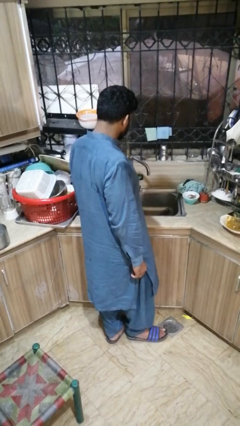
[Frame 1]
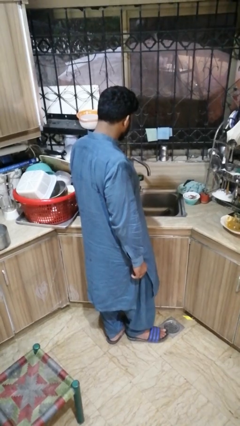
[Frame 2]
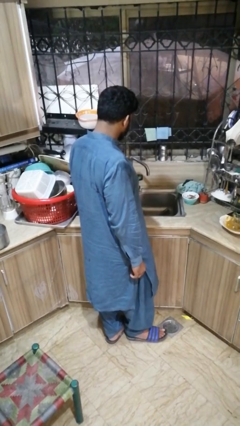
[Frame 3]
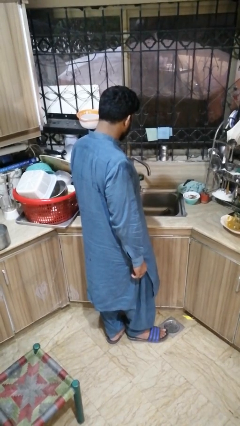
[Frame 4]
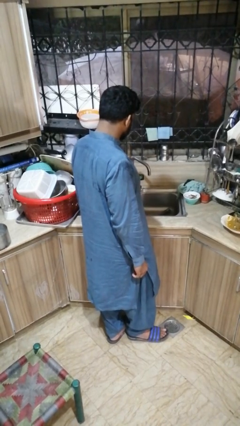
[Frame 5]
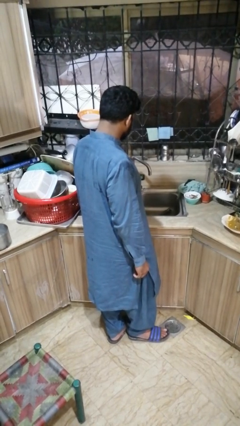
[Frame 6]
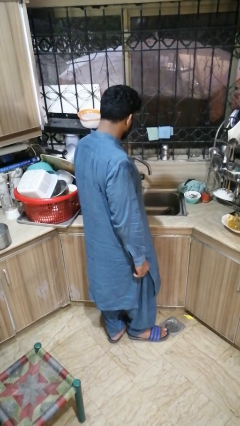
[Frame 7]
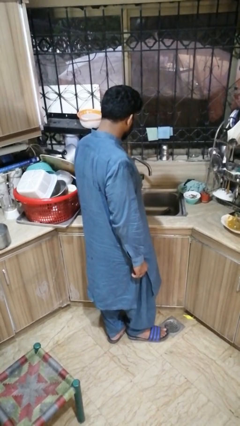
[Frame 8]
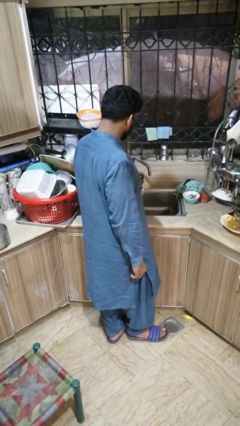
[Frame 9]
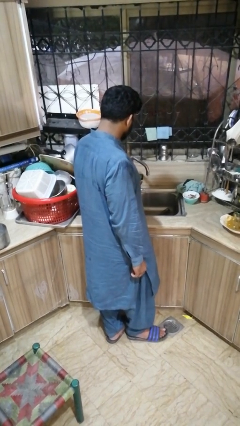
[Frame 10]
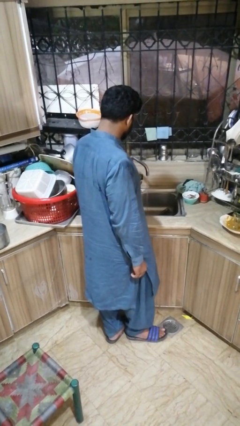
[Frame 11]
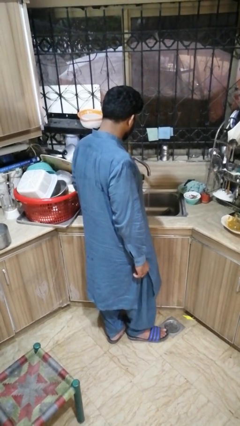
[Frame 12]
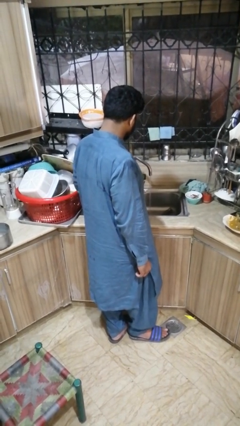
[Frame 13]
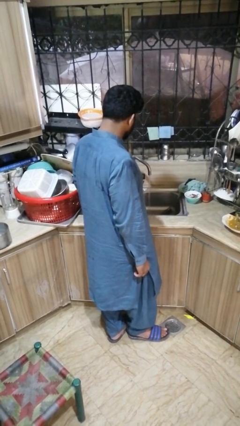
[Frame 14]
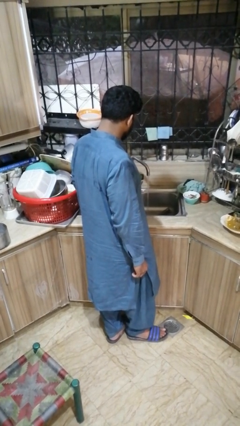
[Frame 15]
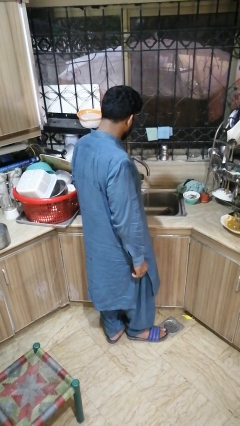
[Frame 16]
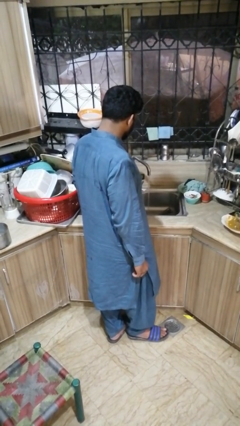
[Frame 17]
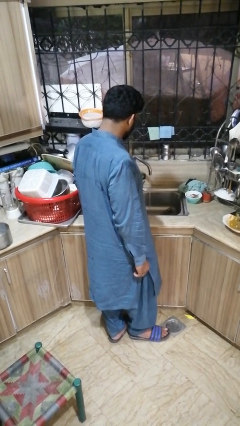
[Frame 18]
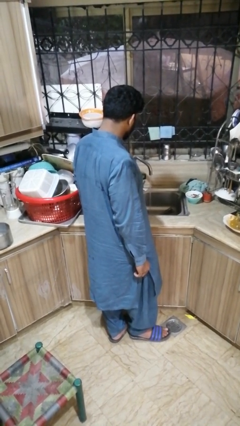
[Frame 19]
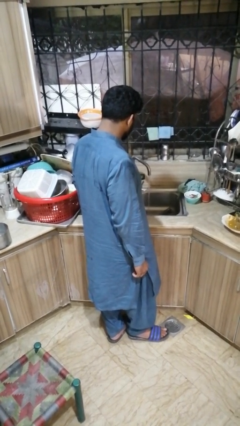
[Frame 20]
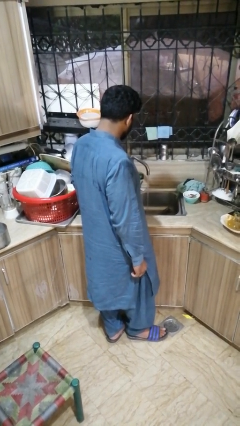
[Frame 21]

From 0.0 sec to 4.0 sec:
person turns on faucet

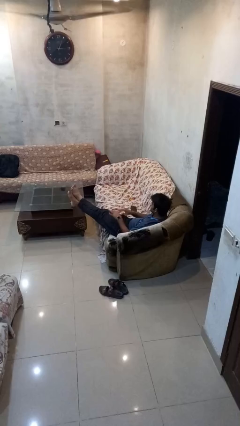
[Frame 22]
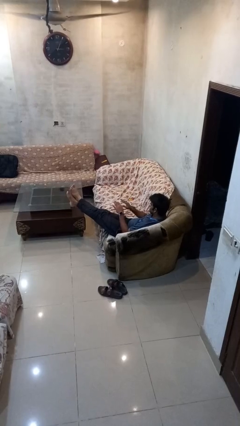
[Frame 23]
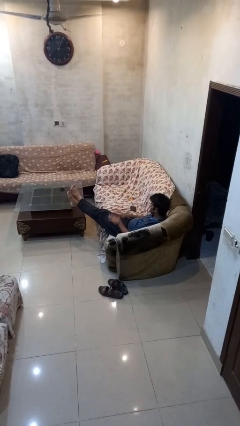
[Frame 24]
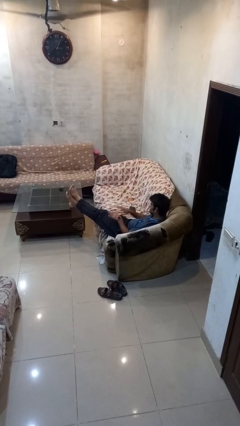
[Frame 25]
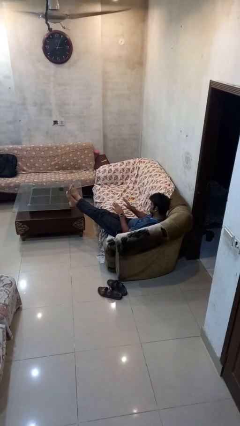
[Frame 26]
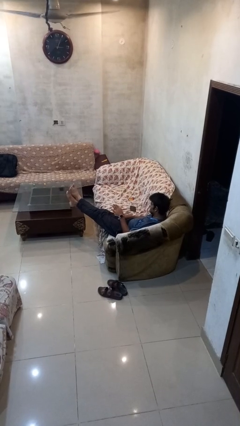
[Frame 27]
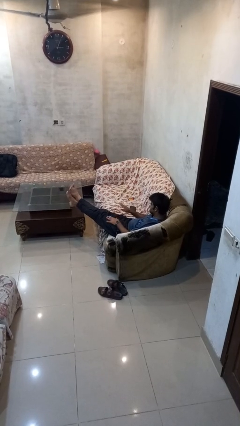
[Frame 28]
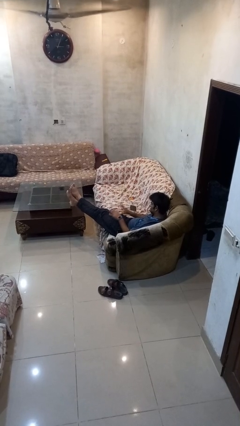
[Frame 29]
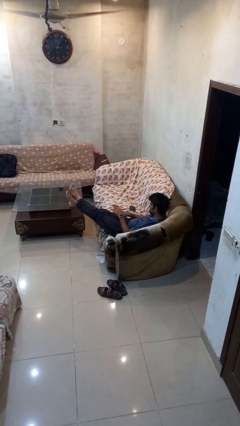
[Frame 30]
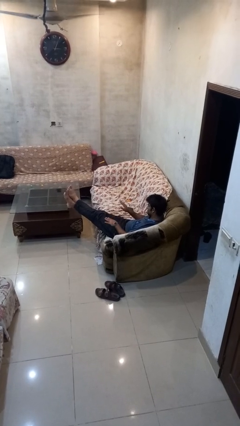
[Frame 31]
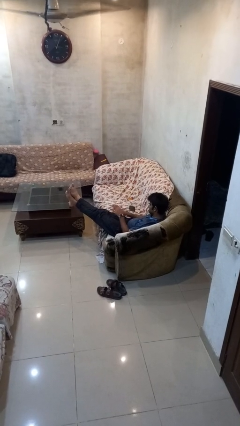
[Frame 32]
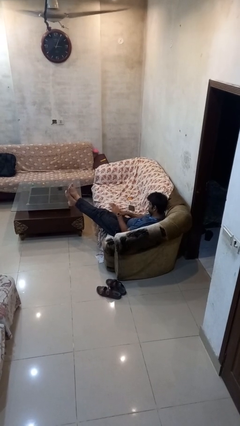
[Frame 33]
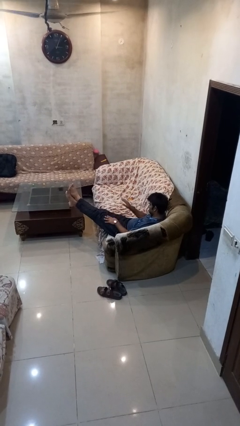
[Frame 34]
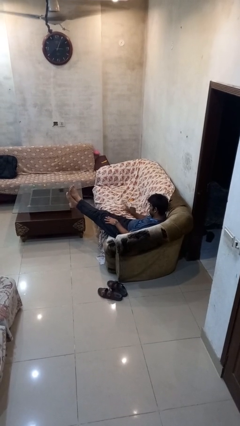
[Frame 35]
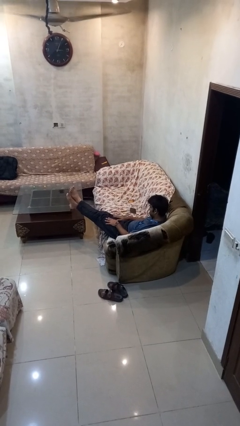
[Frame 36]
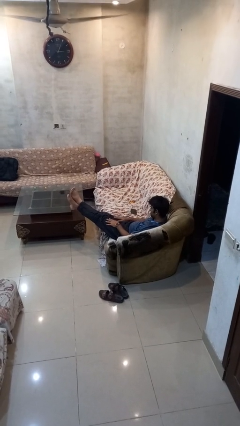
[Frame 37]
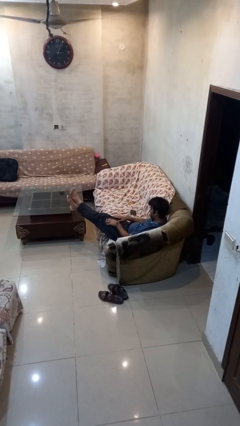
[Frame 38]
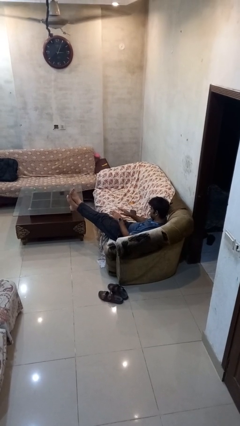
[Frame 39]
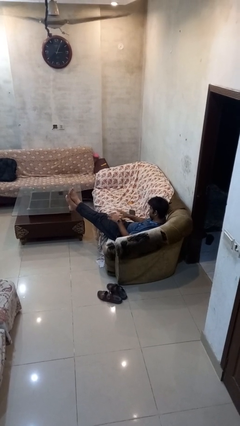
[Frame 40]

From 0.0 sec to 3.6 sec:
person slaps hands on thighs

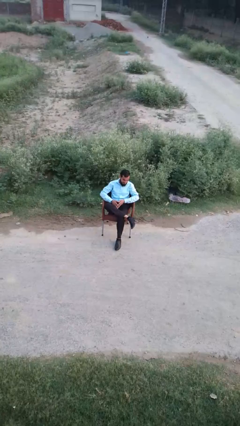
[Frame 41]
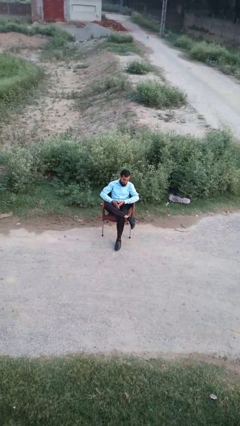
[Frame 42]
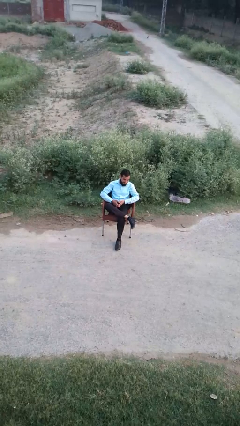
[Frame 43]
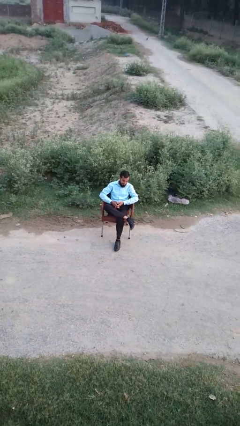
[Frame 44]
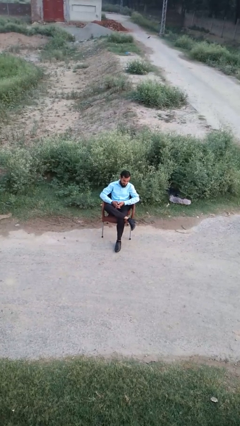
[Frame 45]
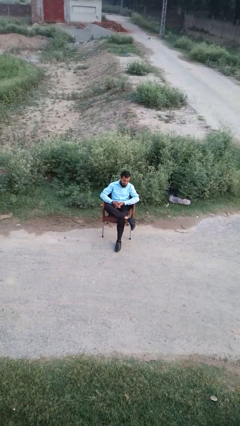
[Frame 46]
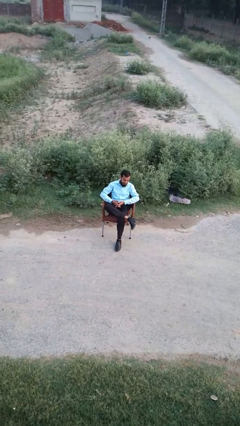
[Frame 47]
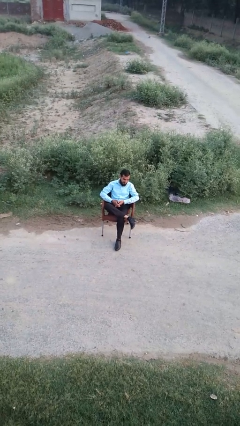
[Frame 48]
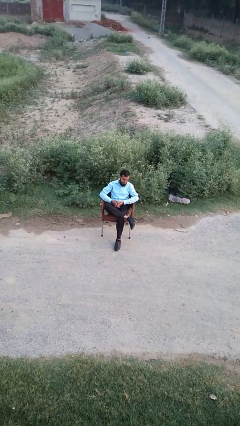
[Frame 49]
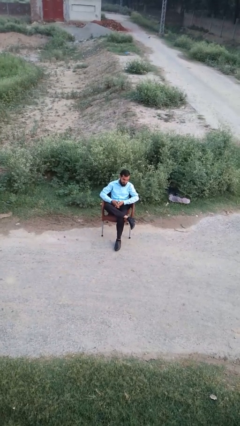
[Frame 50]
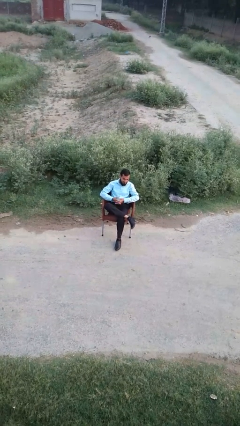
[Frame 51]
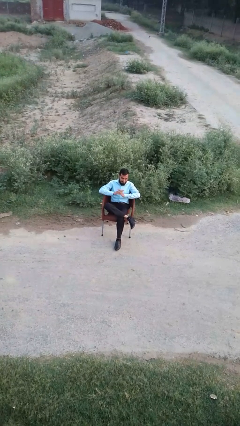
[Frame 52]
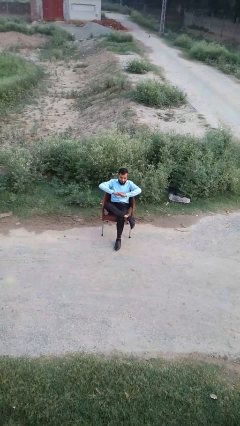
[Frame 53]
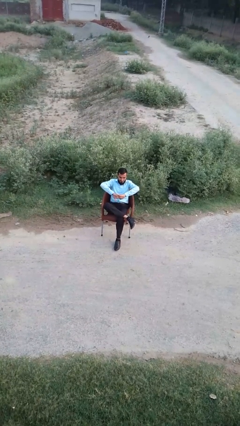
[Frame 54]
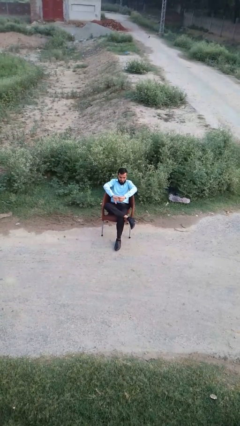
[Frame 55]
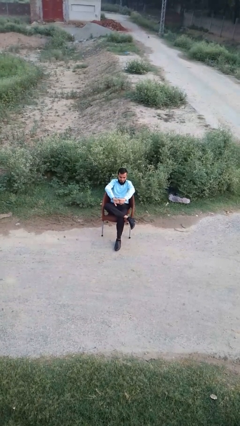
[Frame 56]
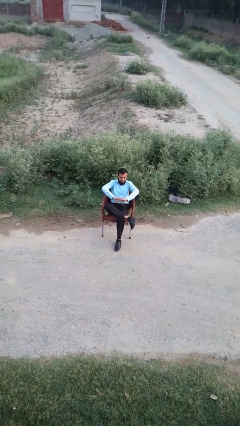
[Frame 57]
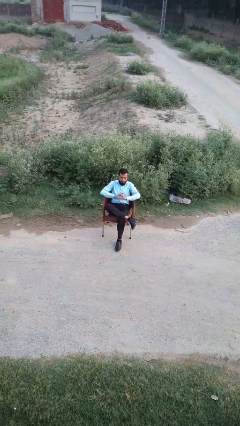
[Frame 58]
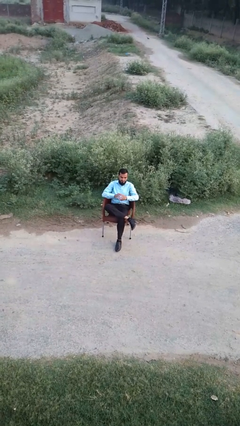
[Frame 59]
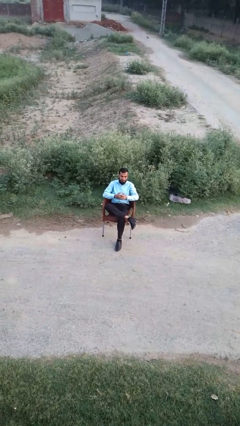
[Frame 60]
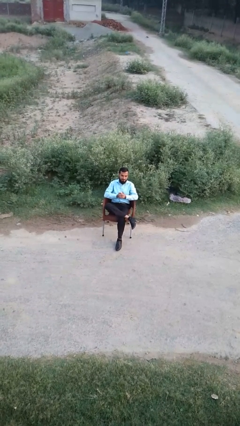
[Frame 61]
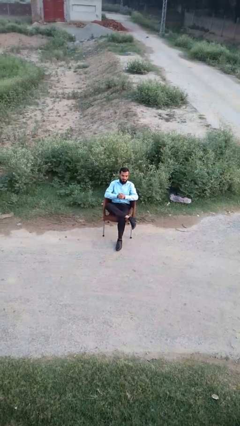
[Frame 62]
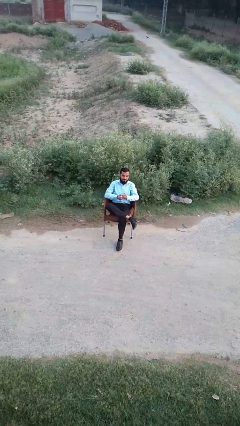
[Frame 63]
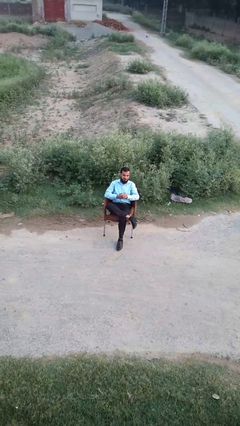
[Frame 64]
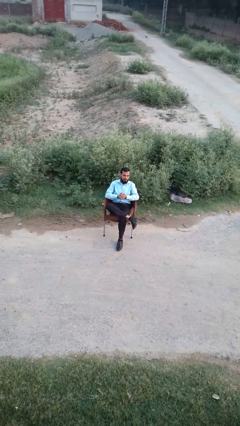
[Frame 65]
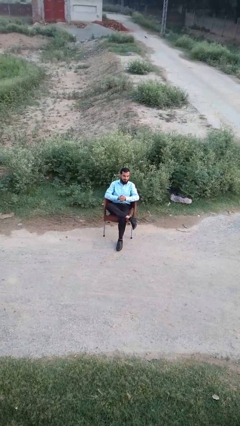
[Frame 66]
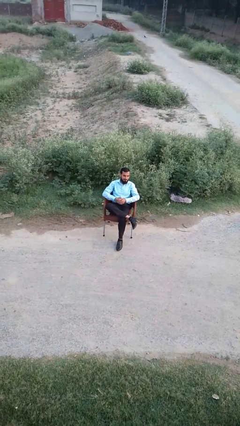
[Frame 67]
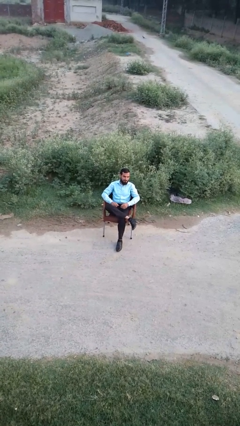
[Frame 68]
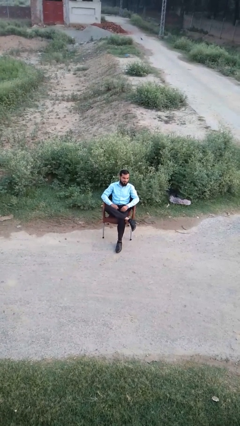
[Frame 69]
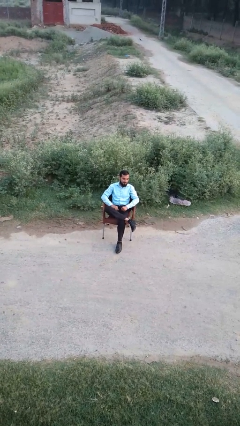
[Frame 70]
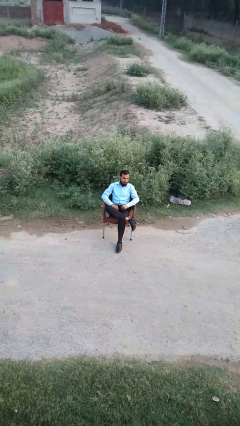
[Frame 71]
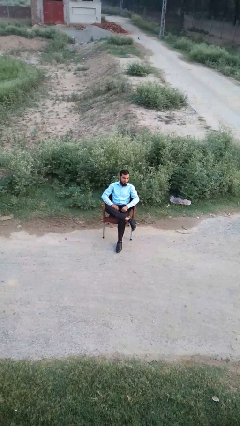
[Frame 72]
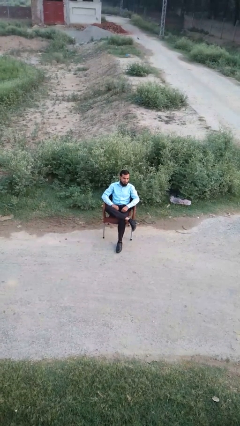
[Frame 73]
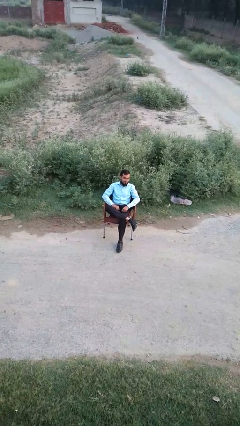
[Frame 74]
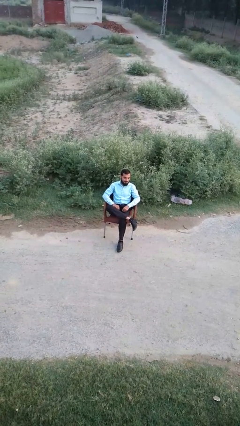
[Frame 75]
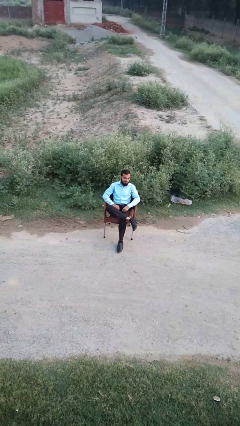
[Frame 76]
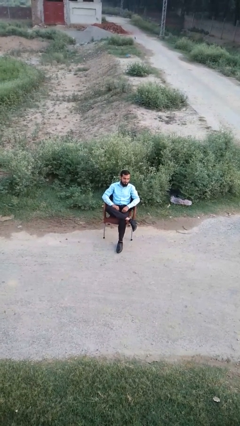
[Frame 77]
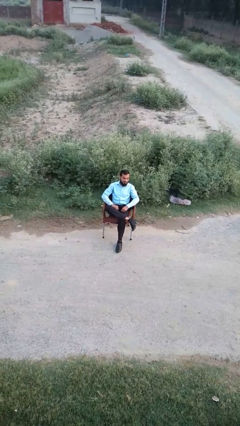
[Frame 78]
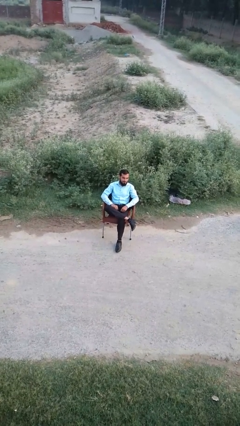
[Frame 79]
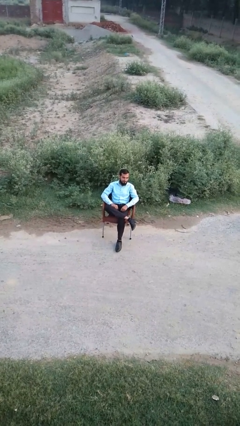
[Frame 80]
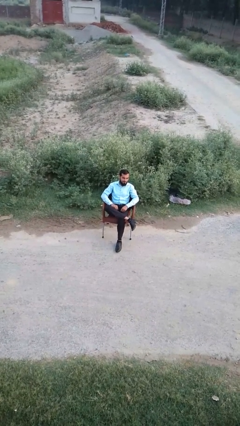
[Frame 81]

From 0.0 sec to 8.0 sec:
person cracks knuckles

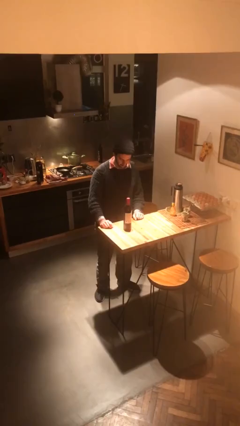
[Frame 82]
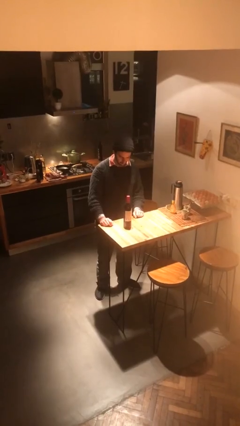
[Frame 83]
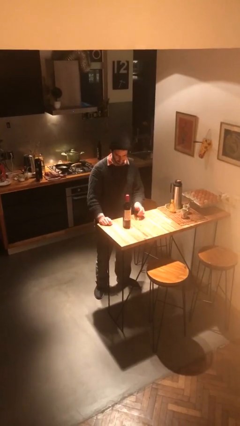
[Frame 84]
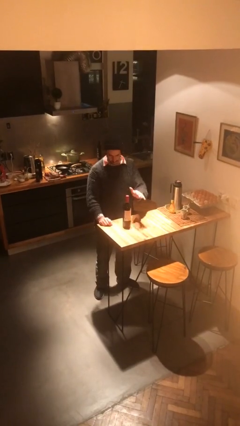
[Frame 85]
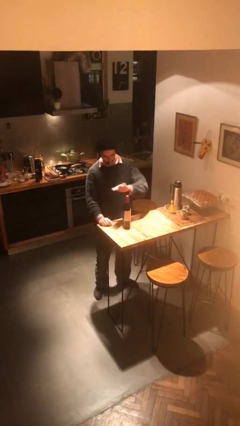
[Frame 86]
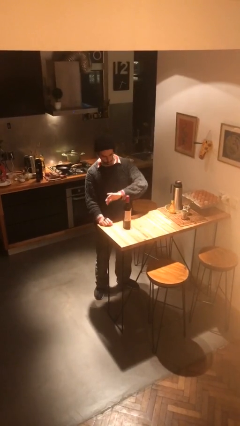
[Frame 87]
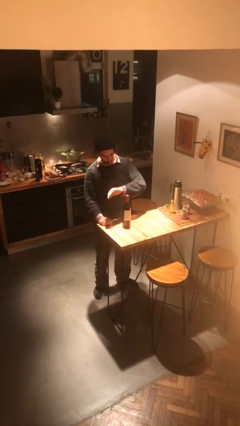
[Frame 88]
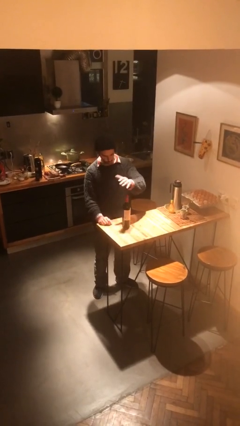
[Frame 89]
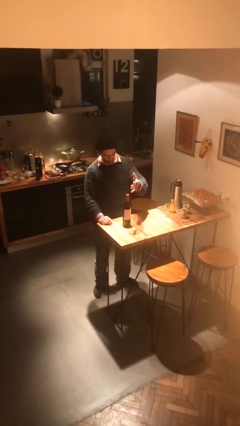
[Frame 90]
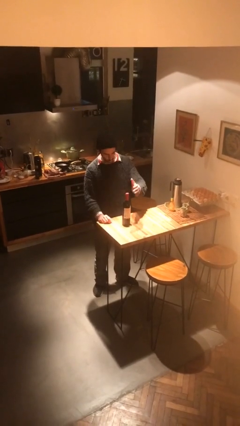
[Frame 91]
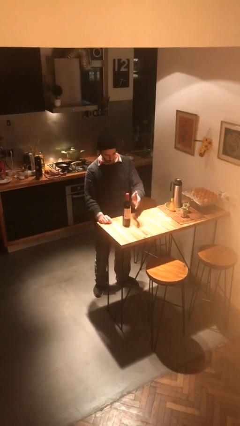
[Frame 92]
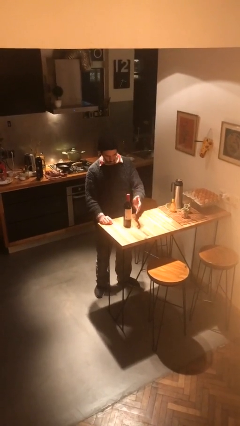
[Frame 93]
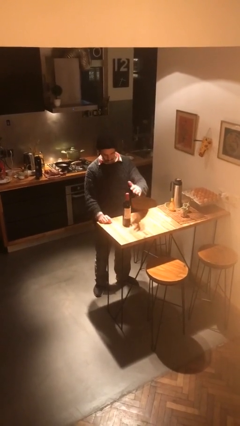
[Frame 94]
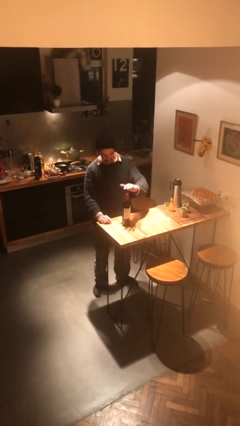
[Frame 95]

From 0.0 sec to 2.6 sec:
person waves hand over object
